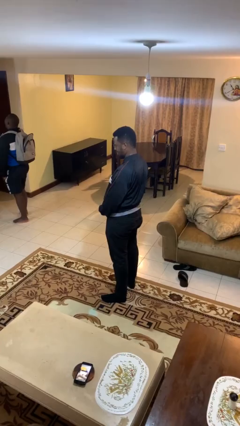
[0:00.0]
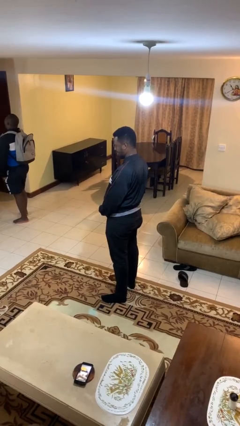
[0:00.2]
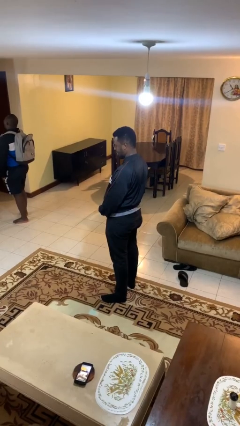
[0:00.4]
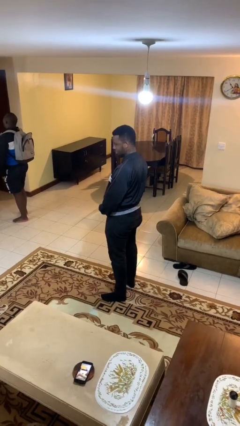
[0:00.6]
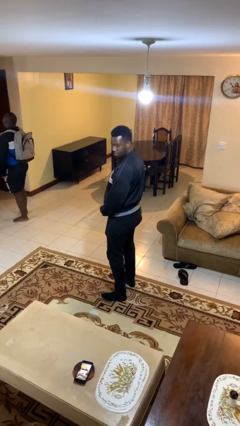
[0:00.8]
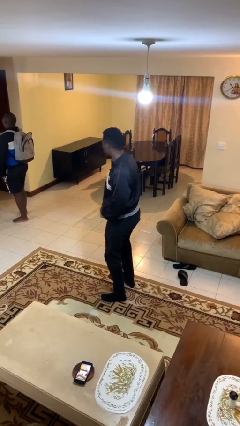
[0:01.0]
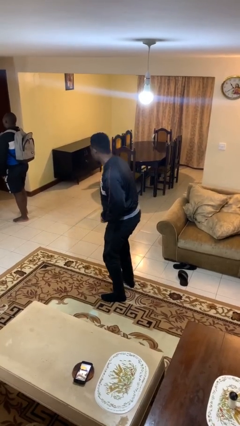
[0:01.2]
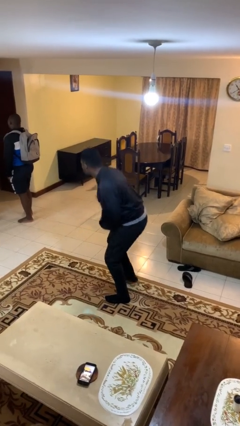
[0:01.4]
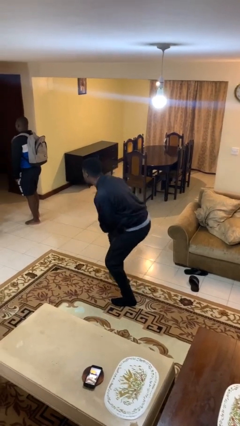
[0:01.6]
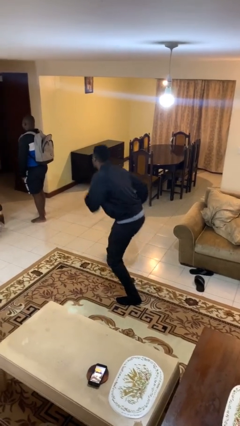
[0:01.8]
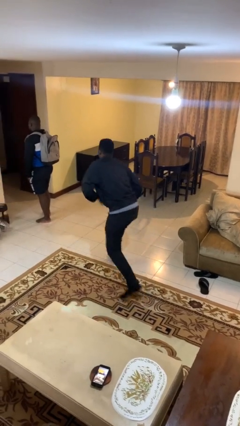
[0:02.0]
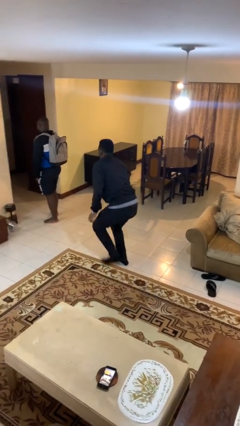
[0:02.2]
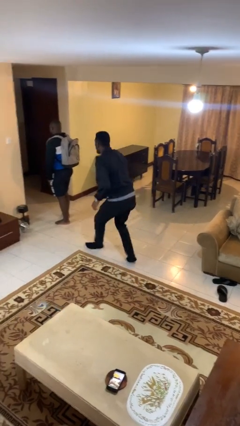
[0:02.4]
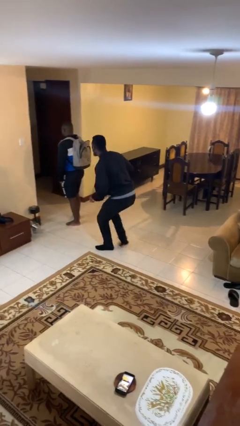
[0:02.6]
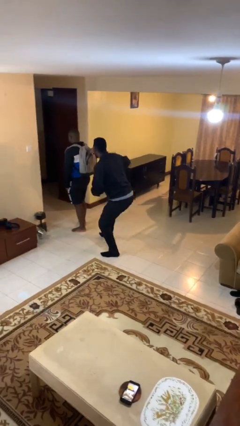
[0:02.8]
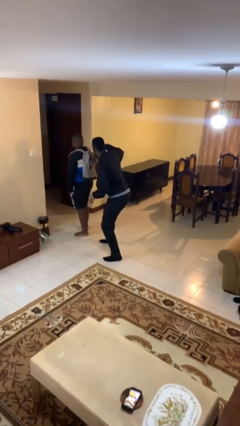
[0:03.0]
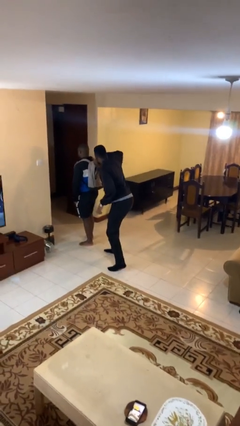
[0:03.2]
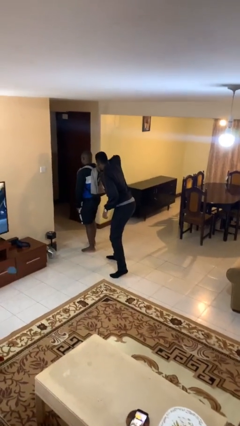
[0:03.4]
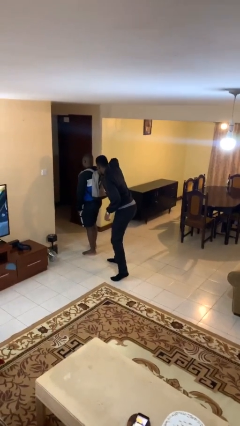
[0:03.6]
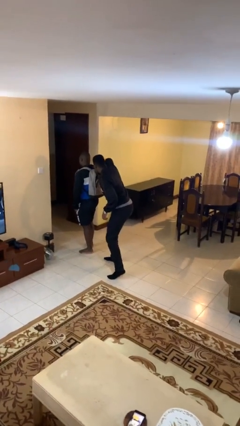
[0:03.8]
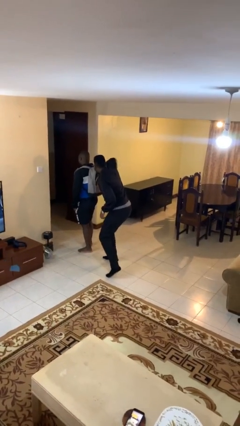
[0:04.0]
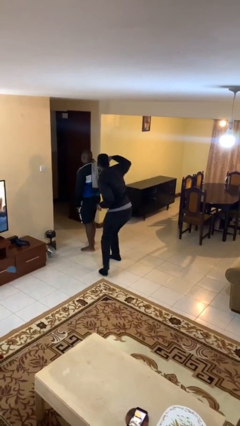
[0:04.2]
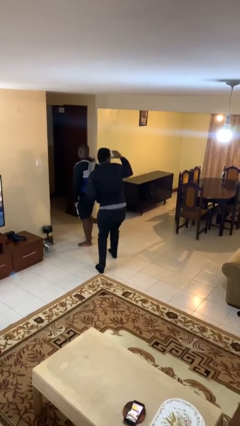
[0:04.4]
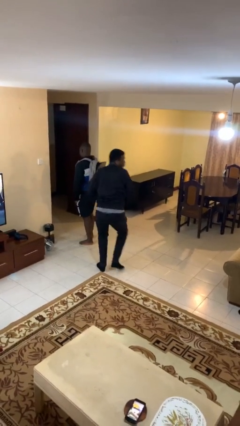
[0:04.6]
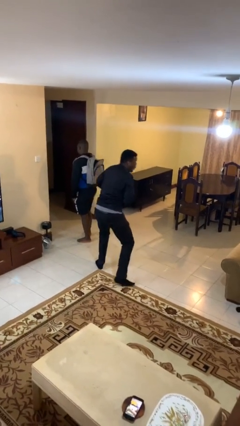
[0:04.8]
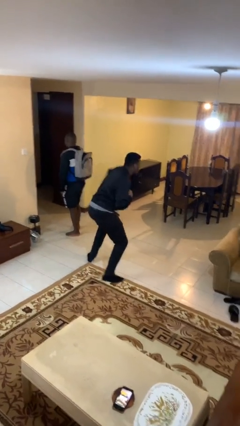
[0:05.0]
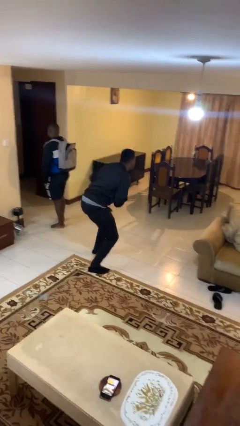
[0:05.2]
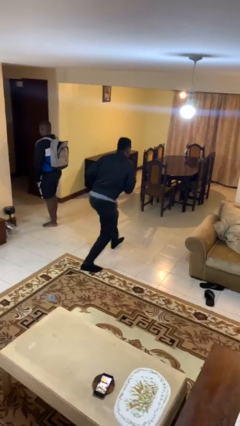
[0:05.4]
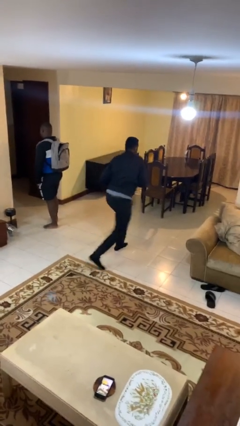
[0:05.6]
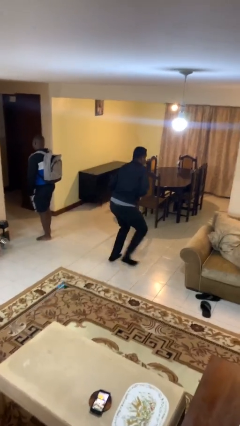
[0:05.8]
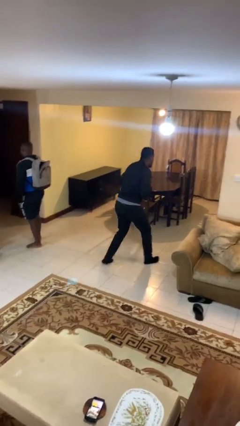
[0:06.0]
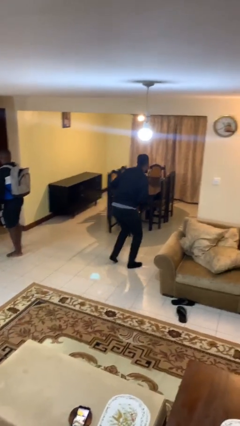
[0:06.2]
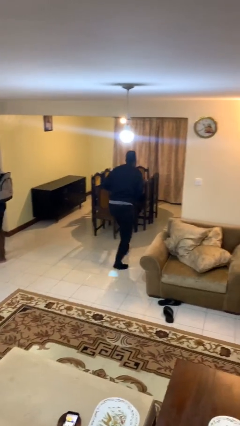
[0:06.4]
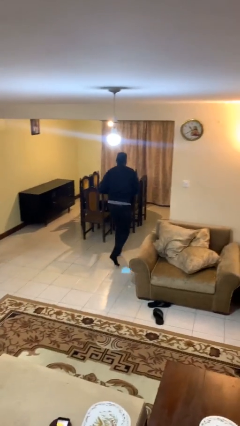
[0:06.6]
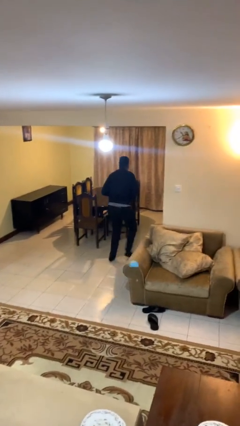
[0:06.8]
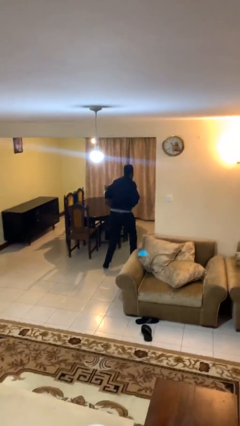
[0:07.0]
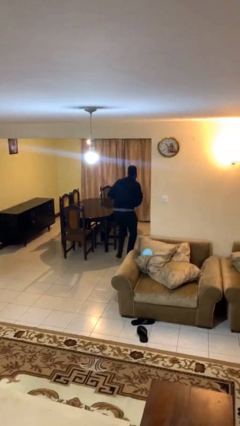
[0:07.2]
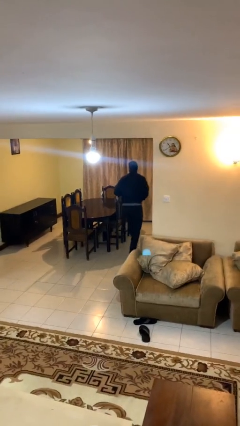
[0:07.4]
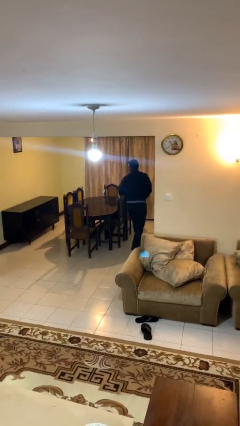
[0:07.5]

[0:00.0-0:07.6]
person steals object from person

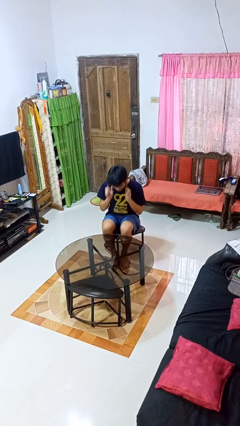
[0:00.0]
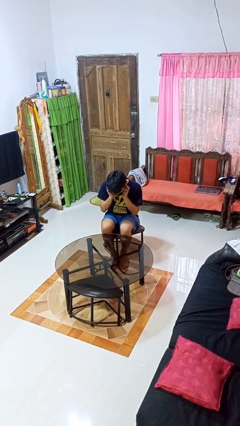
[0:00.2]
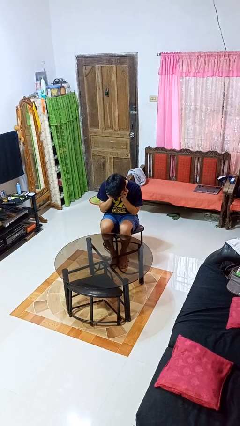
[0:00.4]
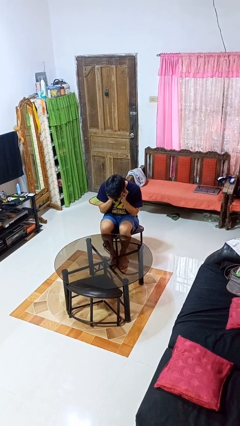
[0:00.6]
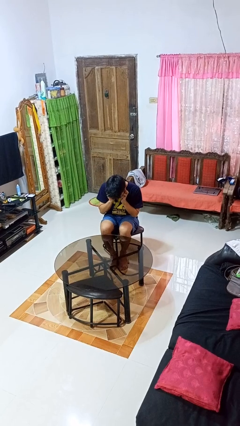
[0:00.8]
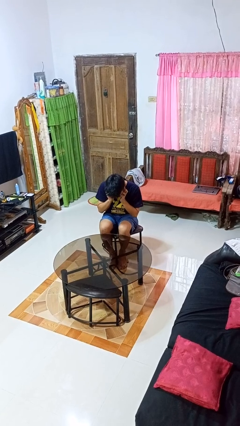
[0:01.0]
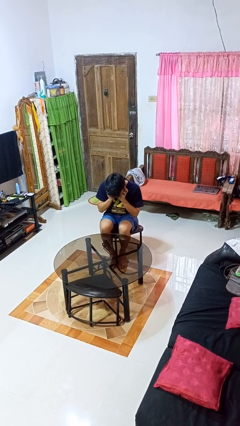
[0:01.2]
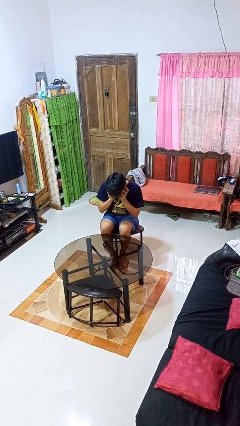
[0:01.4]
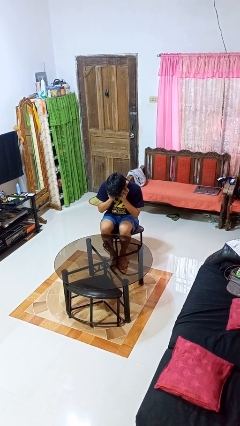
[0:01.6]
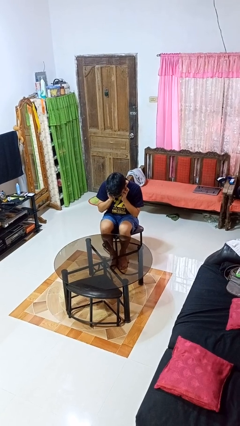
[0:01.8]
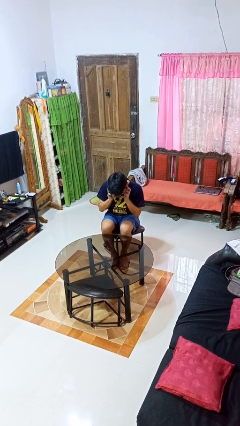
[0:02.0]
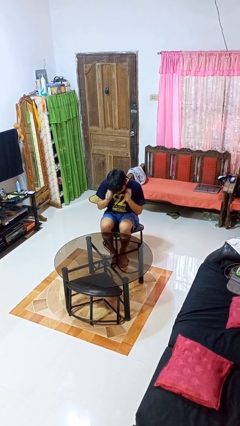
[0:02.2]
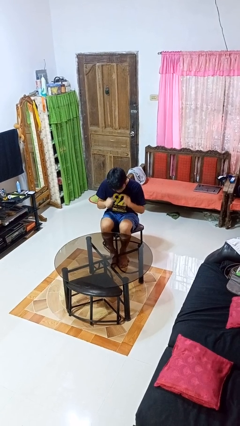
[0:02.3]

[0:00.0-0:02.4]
person puts fingers in ear

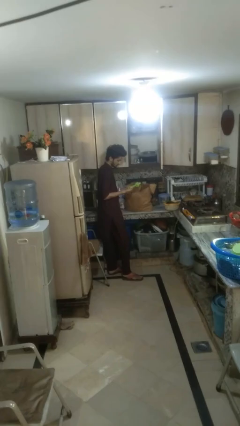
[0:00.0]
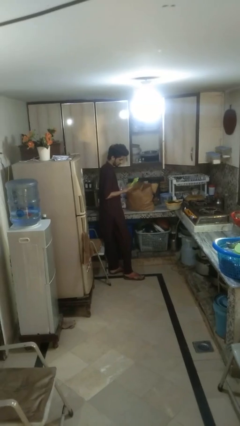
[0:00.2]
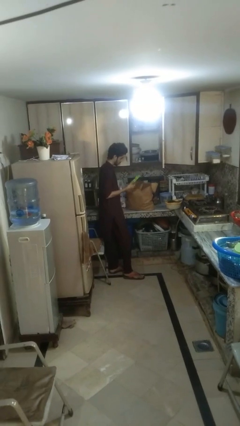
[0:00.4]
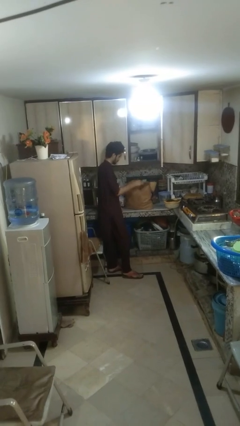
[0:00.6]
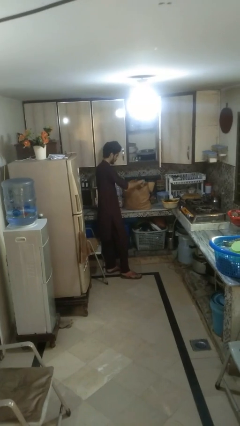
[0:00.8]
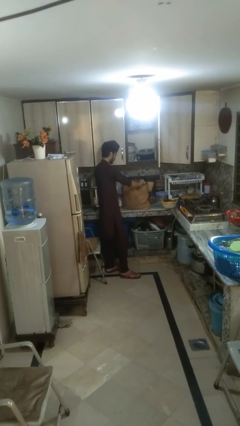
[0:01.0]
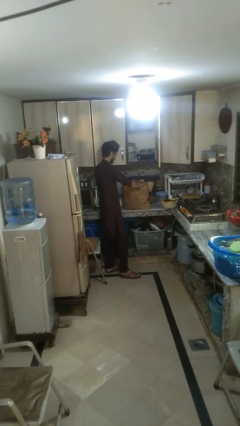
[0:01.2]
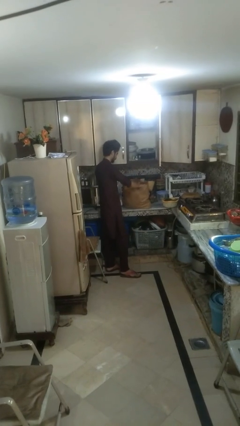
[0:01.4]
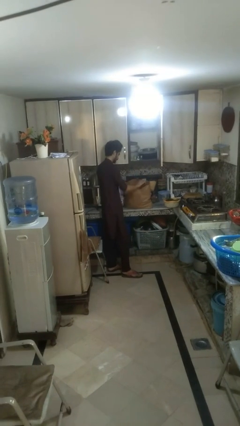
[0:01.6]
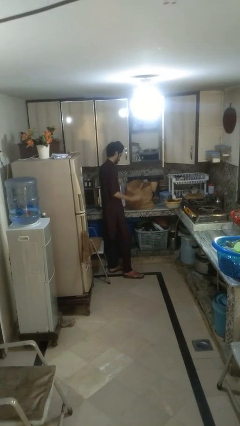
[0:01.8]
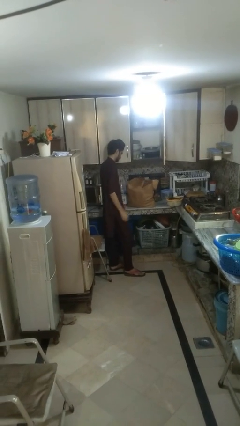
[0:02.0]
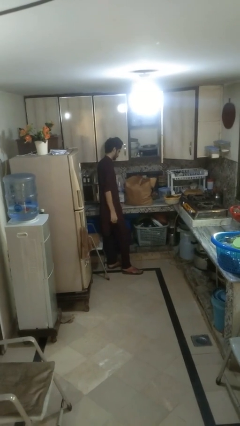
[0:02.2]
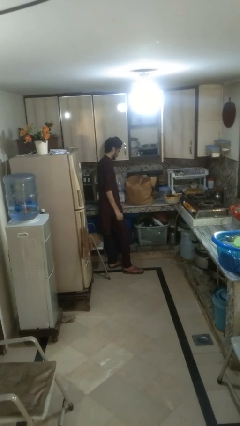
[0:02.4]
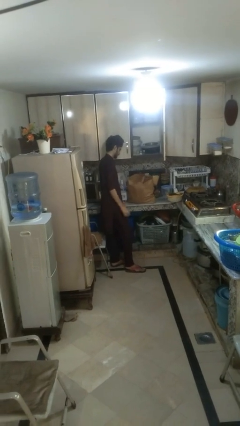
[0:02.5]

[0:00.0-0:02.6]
person puts object into bag

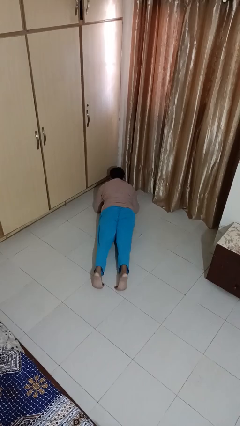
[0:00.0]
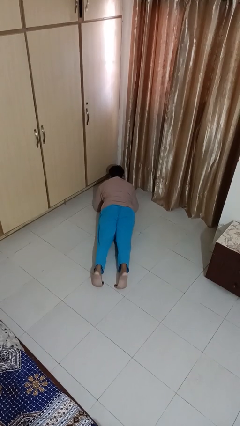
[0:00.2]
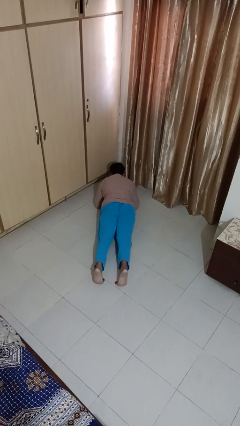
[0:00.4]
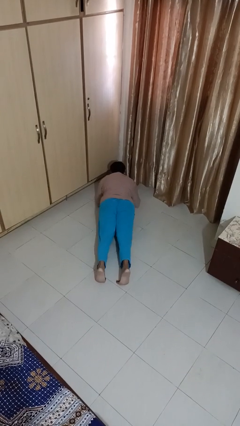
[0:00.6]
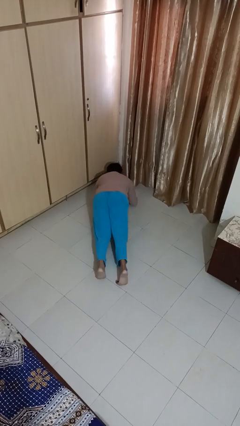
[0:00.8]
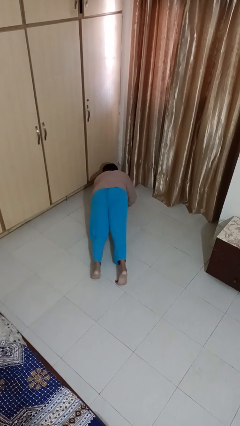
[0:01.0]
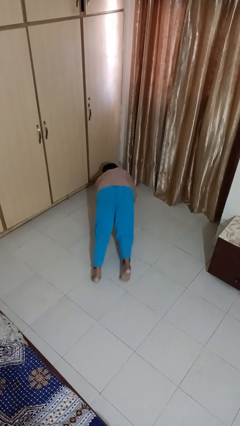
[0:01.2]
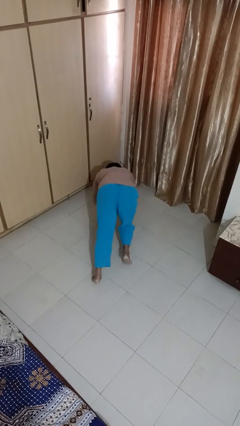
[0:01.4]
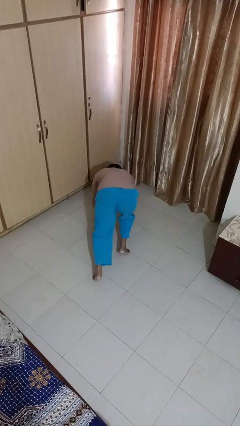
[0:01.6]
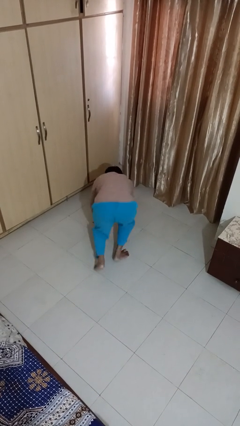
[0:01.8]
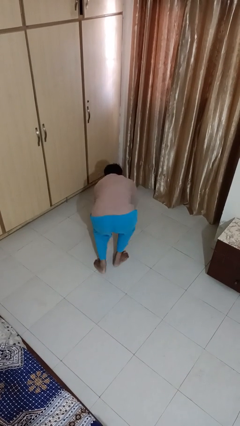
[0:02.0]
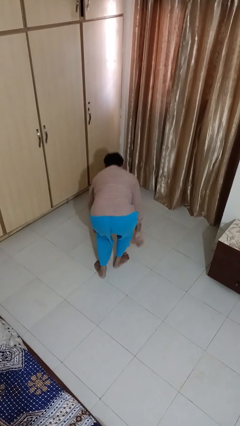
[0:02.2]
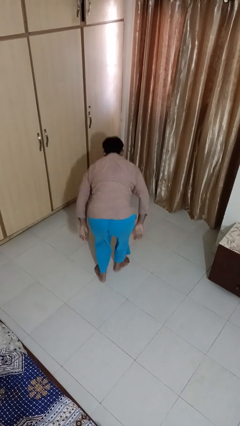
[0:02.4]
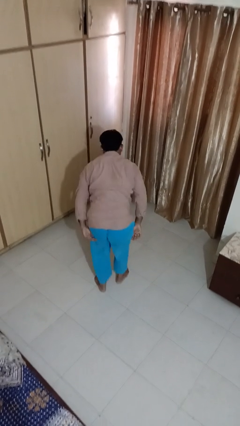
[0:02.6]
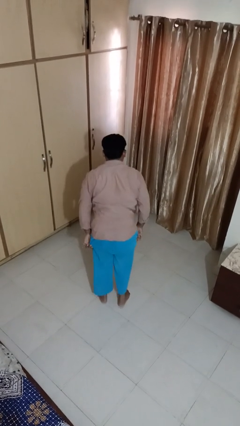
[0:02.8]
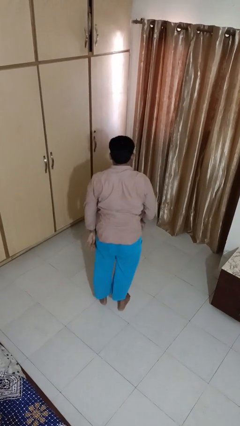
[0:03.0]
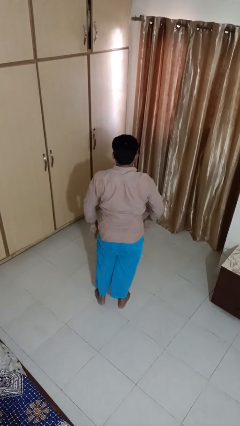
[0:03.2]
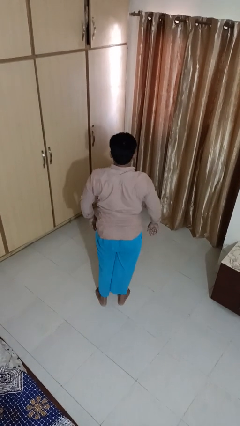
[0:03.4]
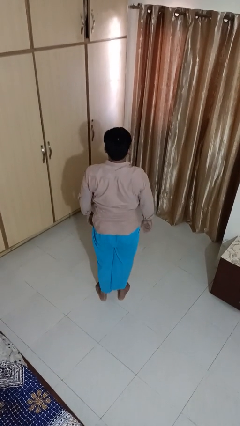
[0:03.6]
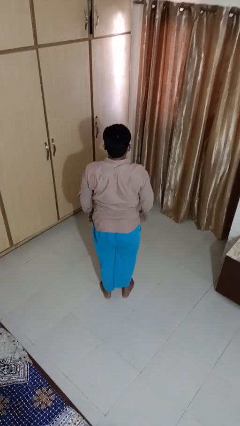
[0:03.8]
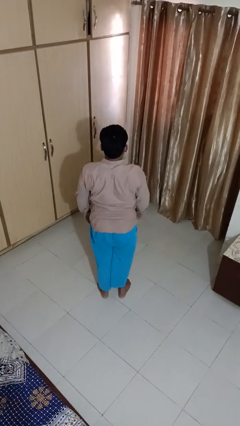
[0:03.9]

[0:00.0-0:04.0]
person stands up from floor

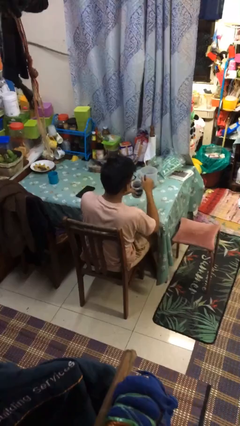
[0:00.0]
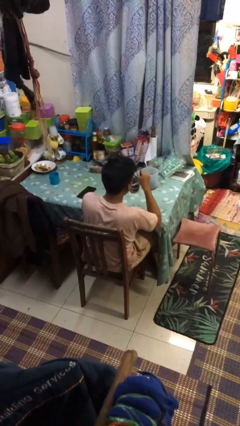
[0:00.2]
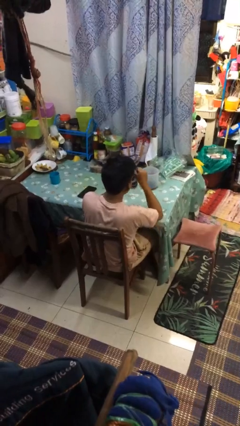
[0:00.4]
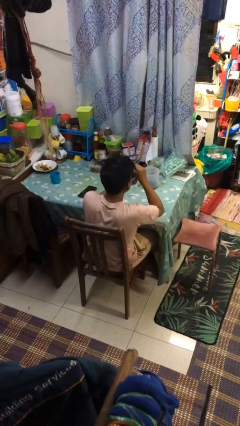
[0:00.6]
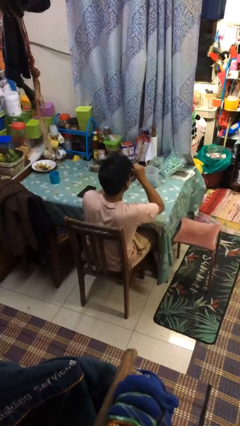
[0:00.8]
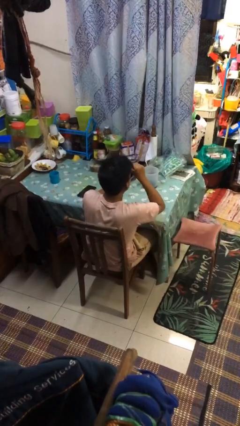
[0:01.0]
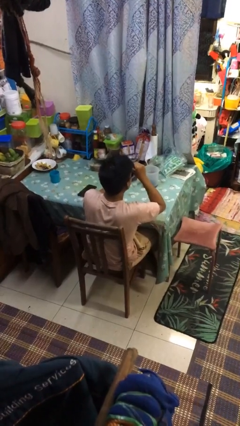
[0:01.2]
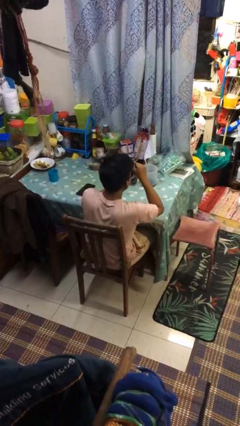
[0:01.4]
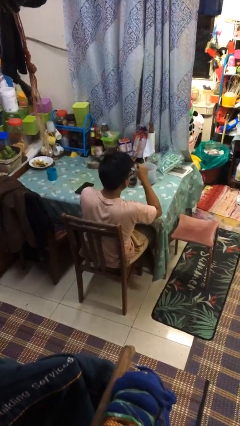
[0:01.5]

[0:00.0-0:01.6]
person drinks from mug
